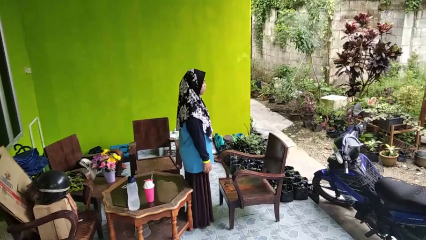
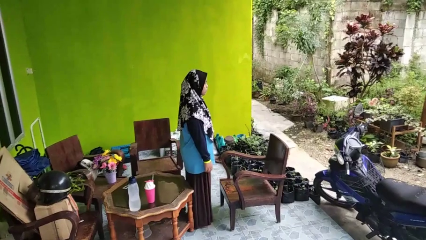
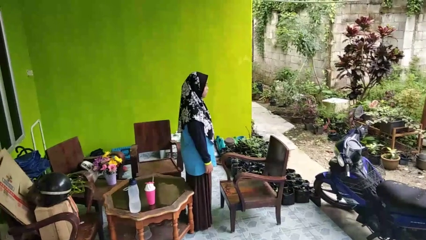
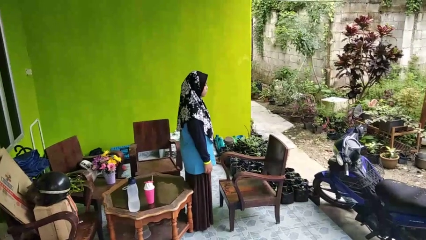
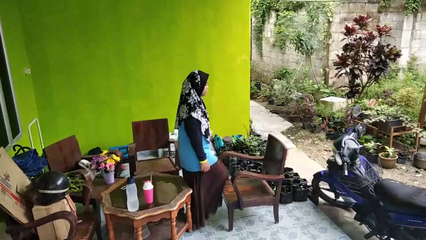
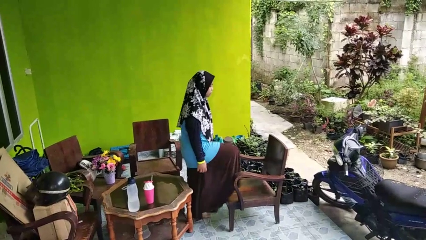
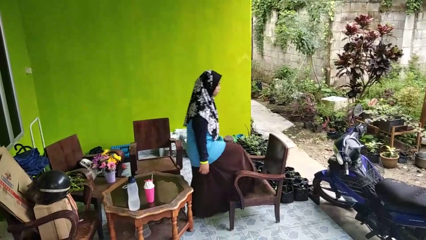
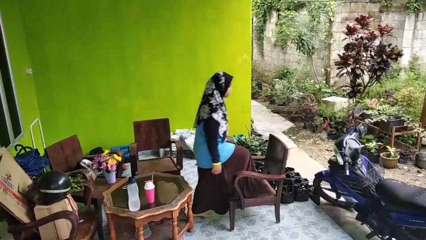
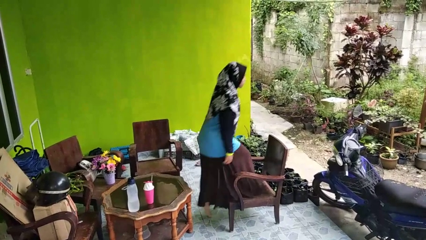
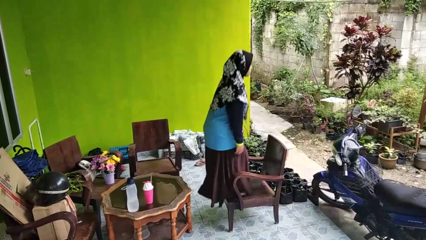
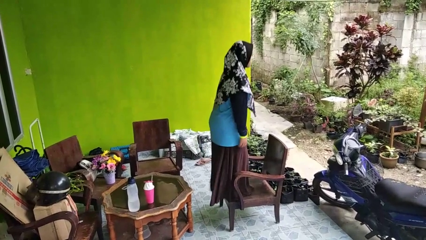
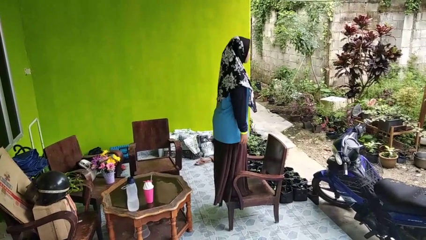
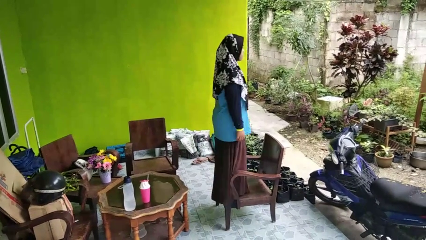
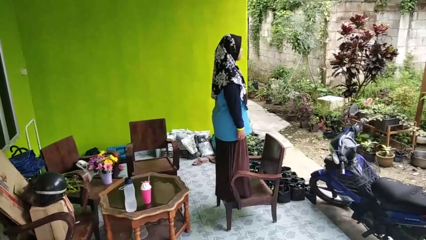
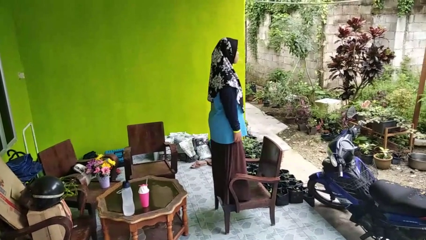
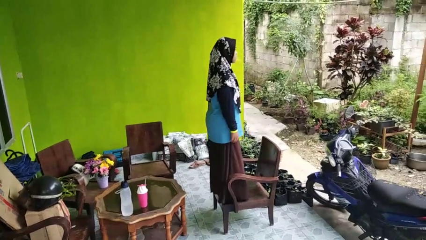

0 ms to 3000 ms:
person climbs on chair

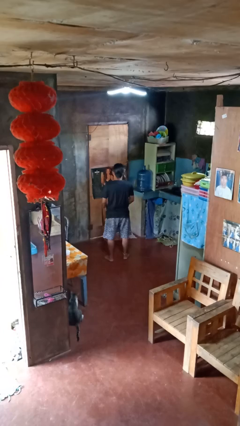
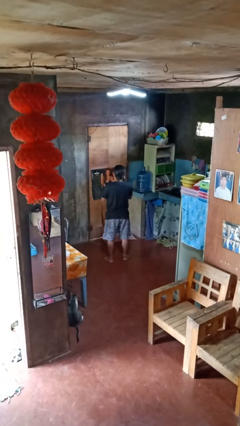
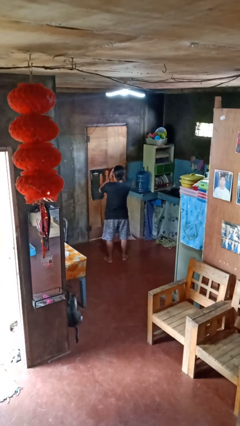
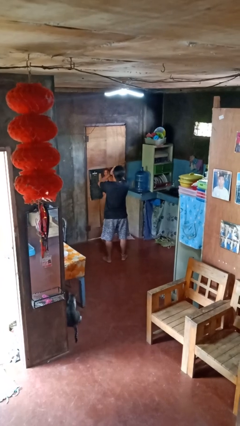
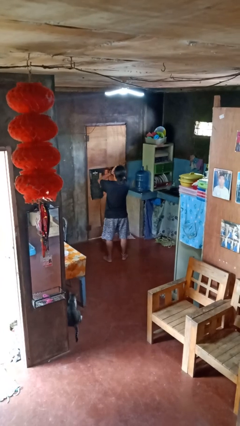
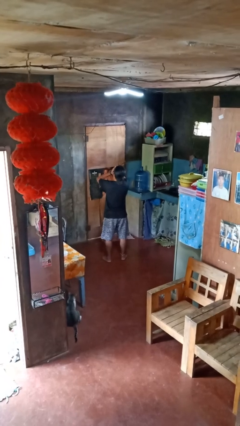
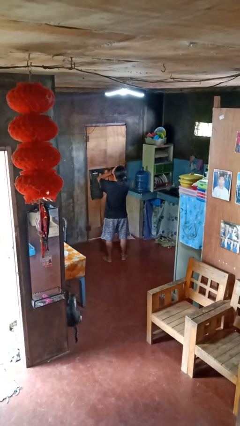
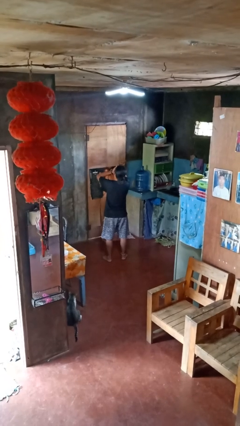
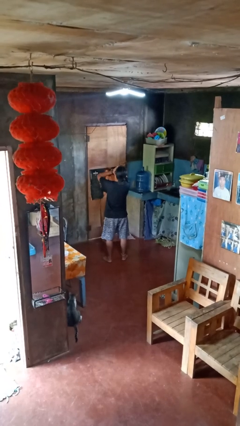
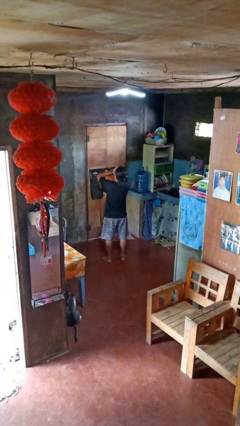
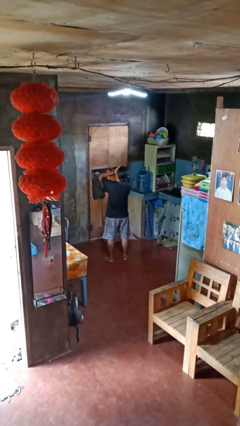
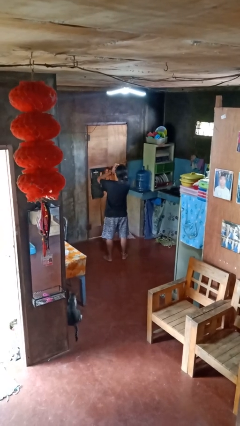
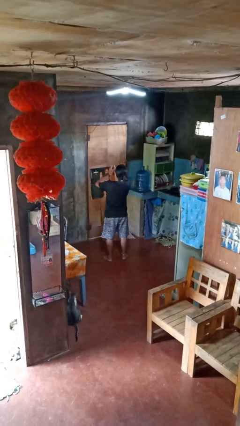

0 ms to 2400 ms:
person yawns

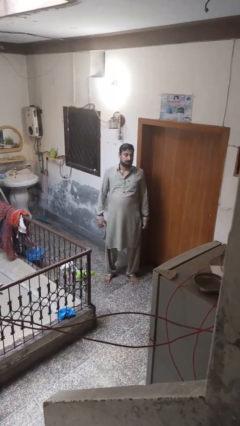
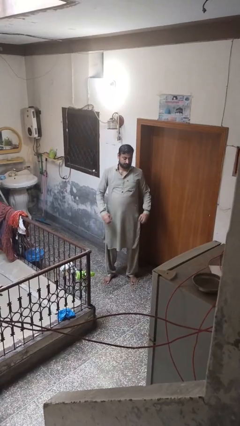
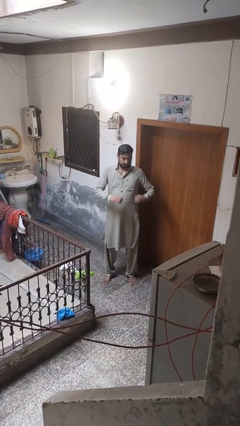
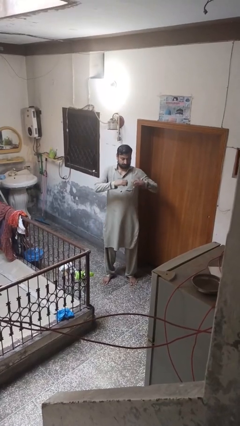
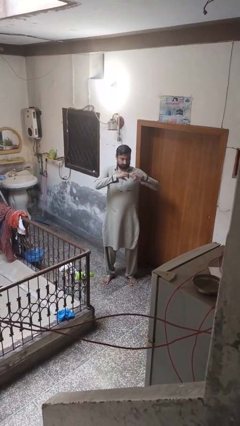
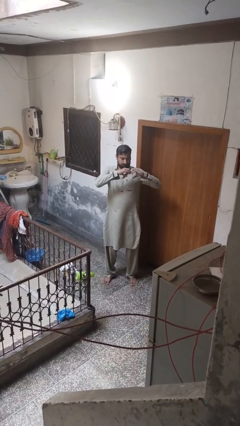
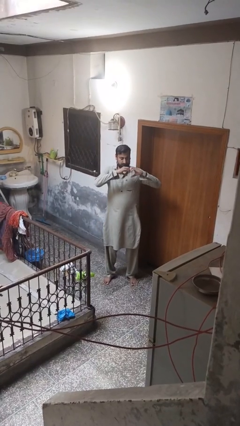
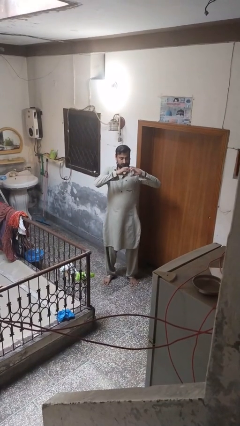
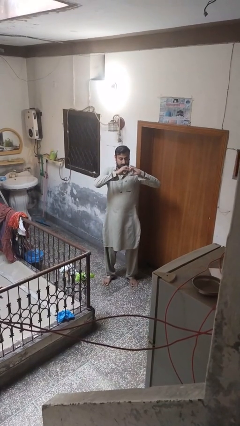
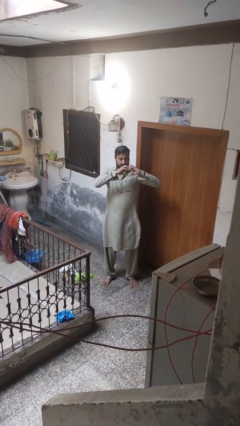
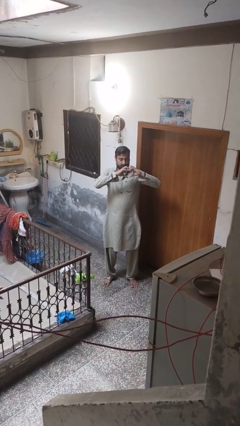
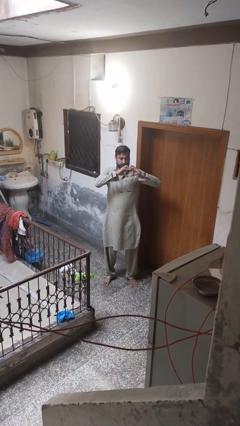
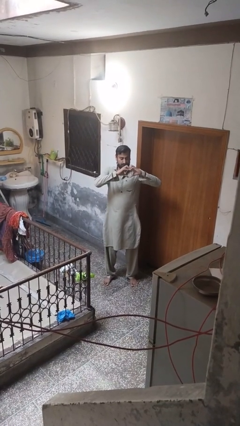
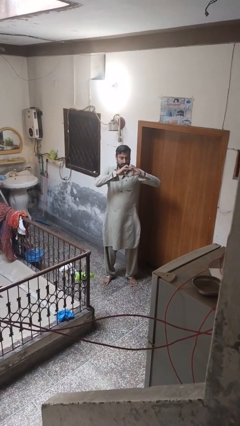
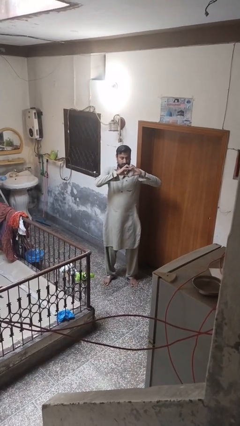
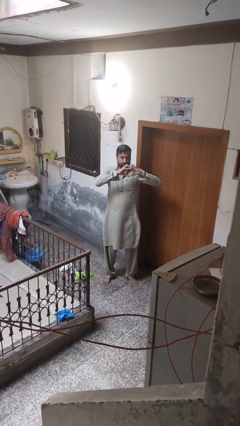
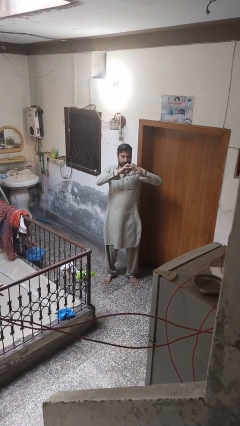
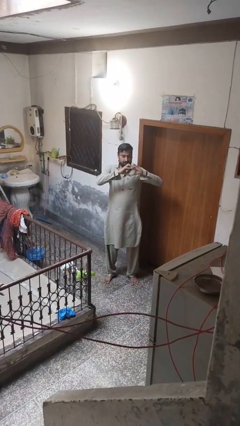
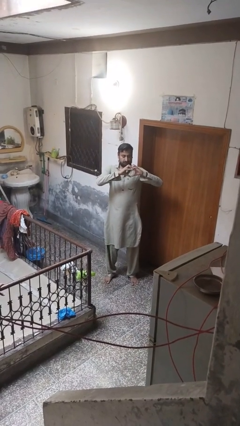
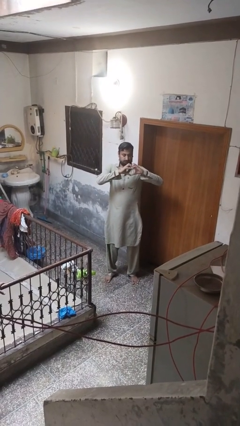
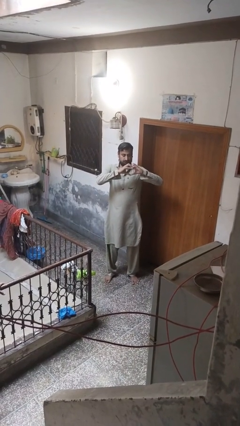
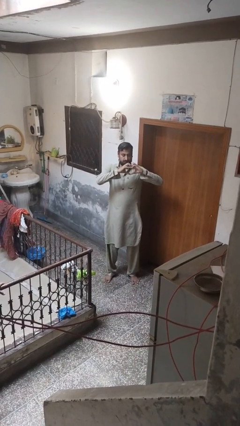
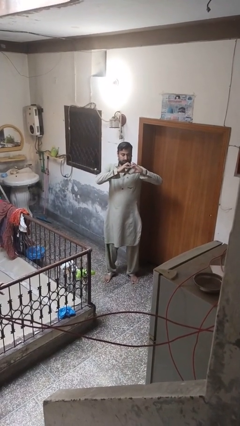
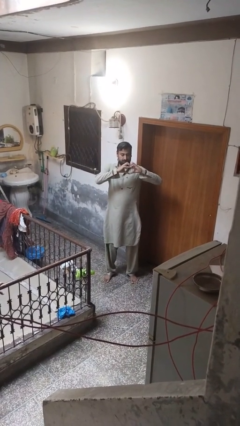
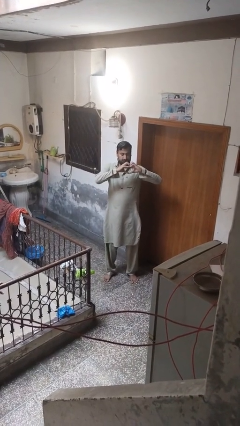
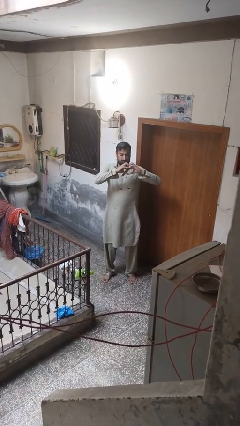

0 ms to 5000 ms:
person gestures heart

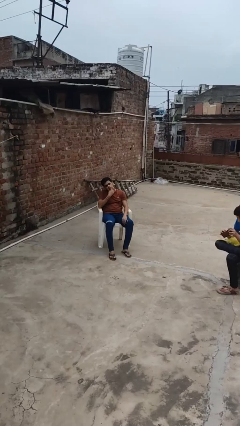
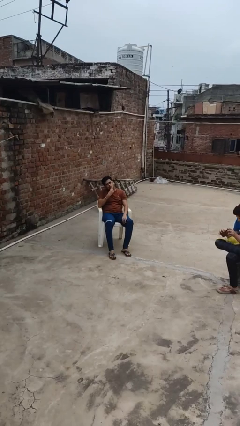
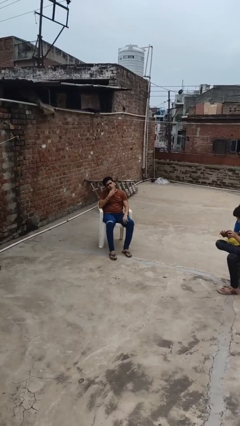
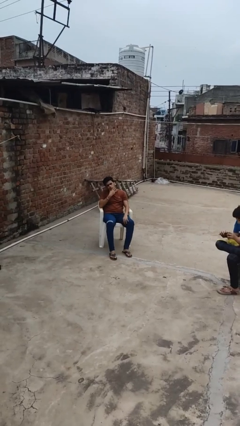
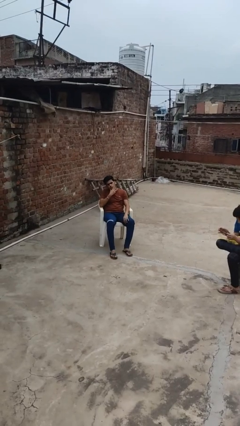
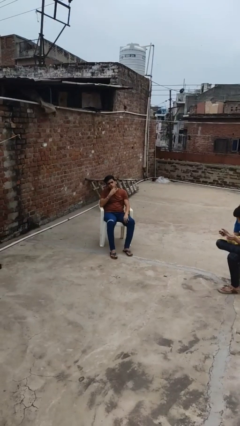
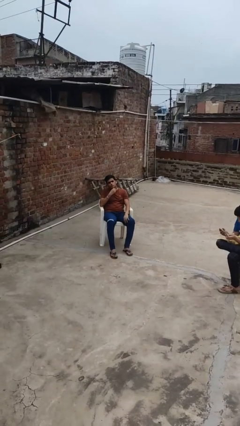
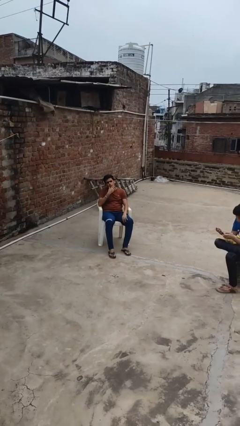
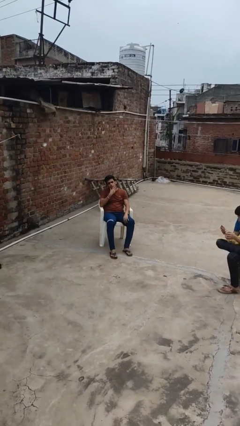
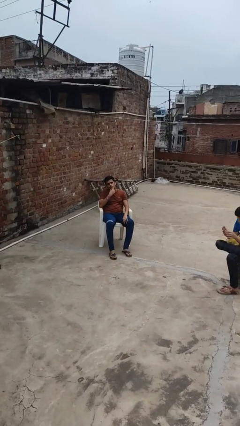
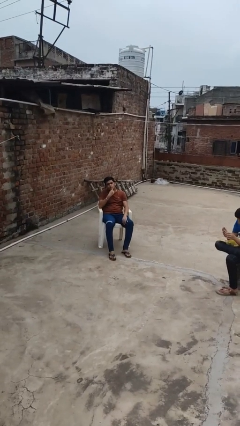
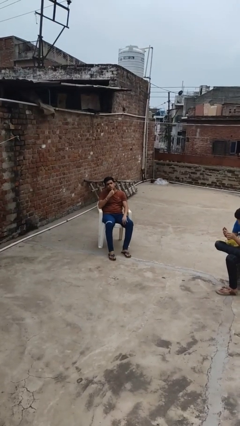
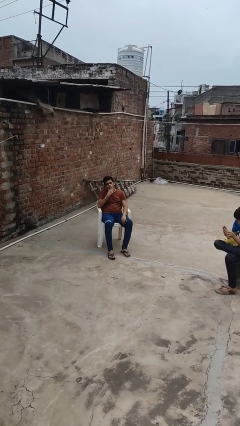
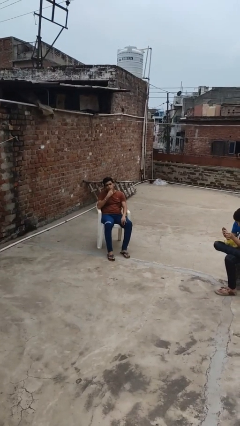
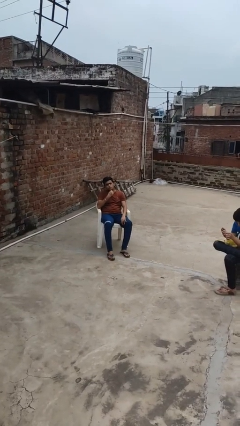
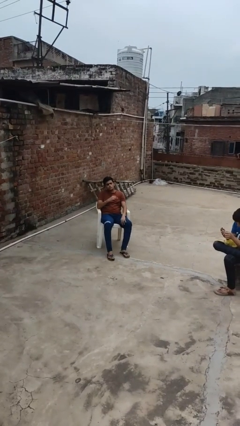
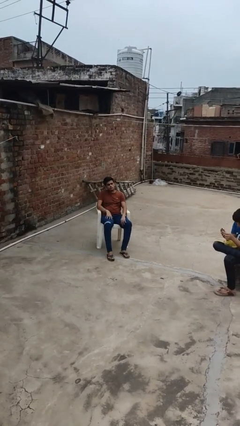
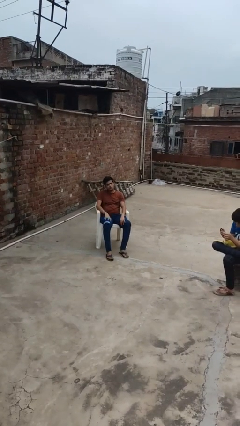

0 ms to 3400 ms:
person strokes chin

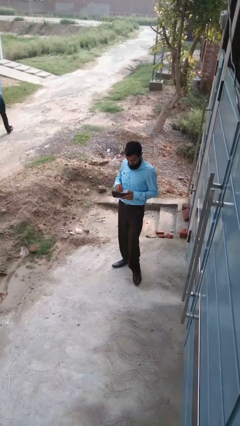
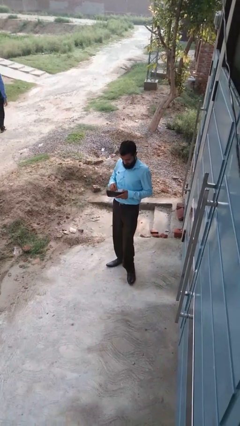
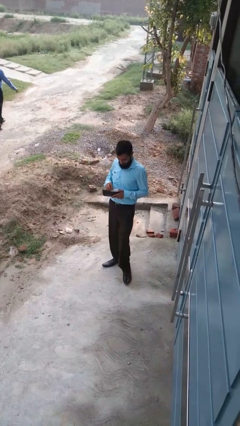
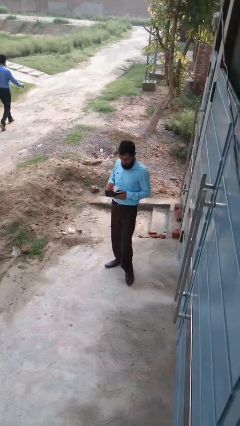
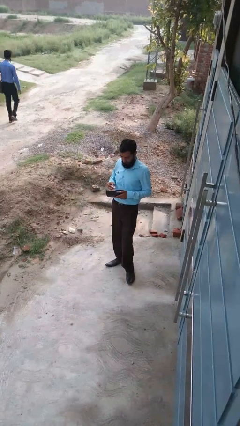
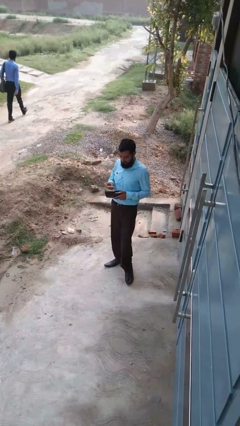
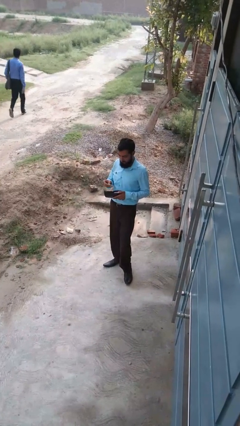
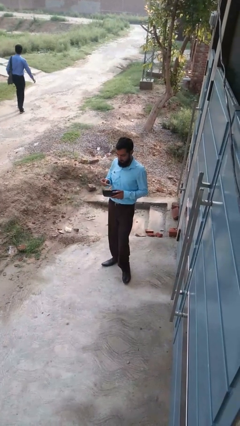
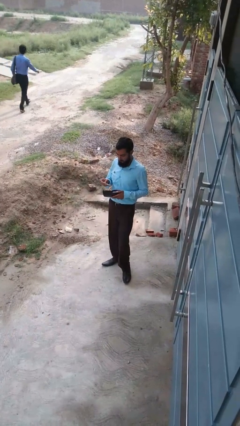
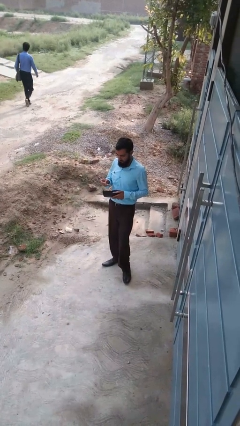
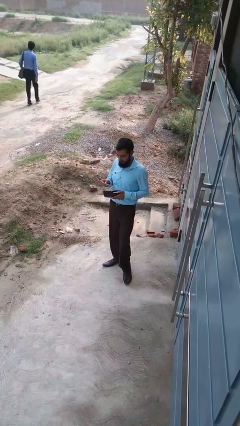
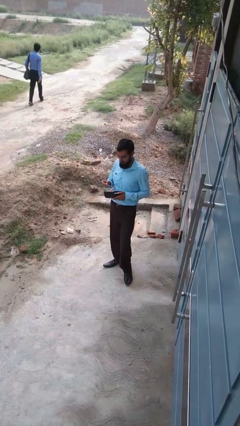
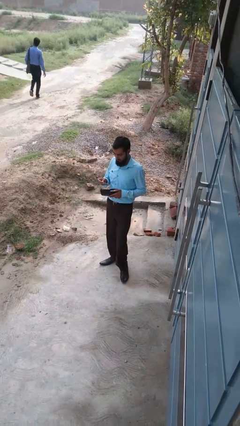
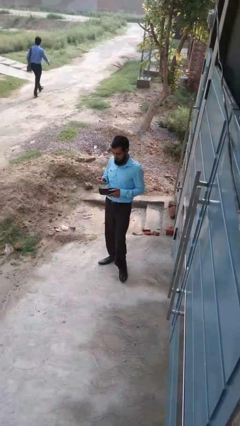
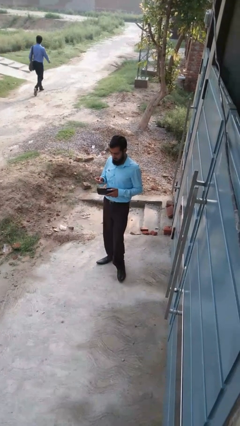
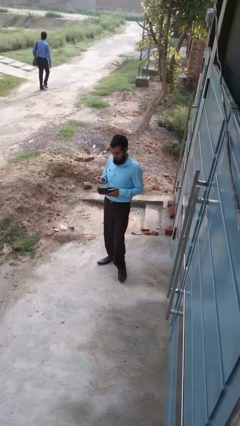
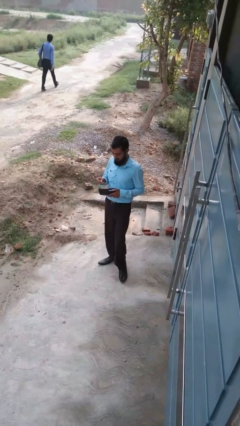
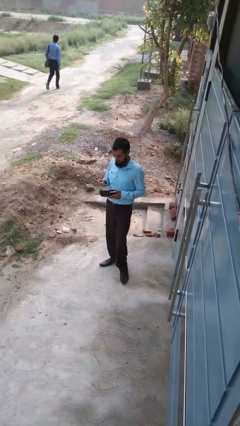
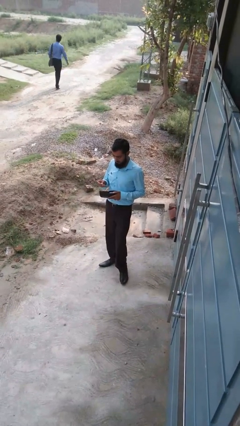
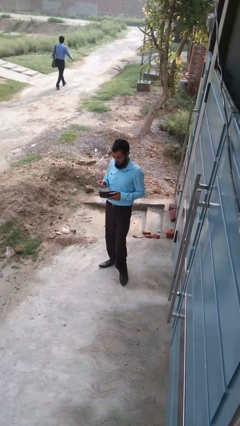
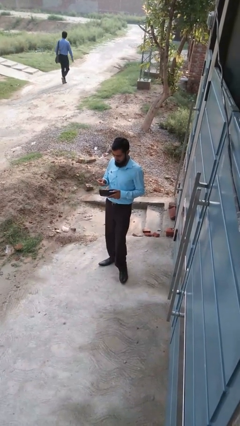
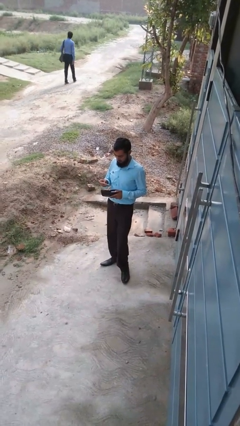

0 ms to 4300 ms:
person takes object from purse
